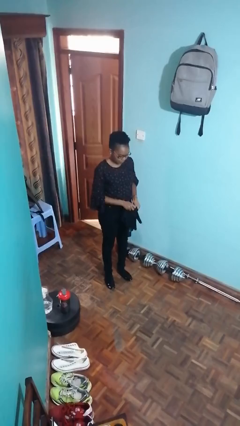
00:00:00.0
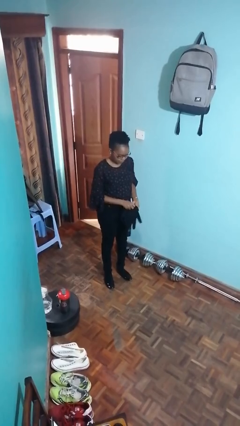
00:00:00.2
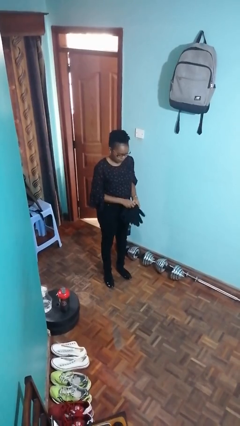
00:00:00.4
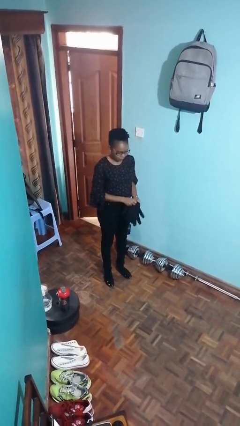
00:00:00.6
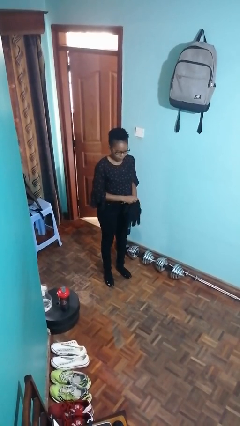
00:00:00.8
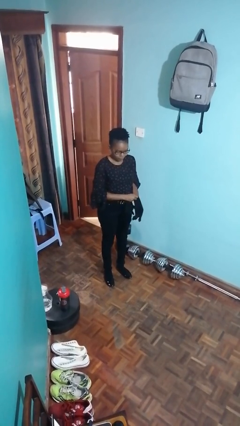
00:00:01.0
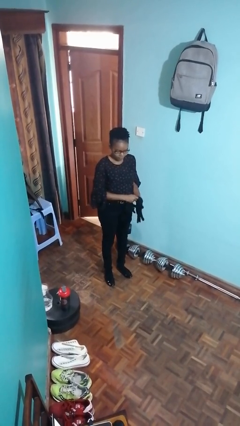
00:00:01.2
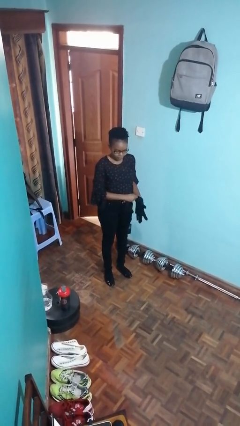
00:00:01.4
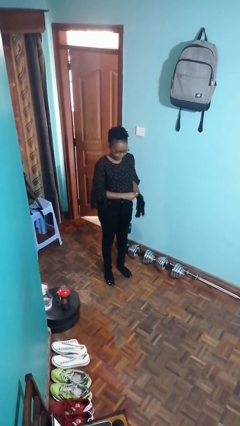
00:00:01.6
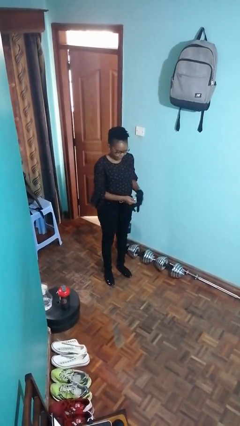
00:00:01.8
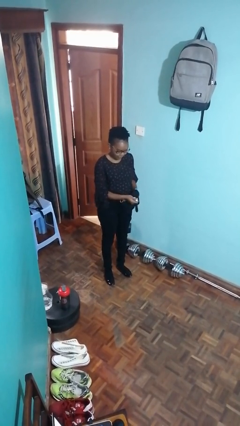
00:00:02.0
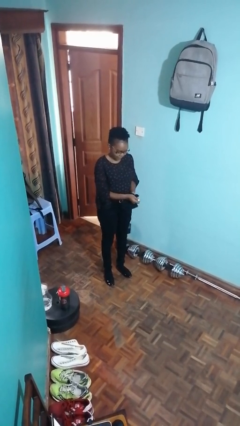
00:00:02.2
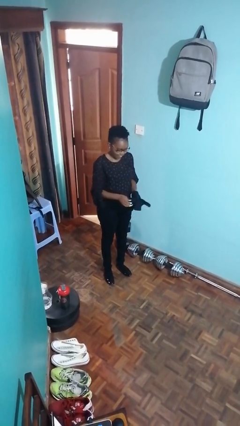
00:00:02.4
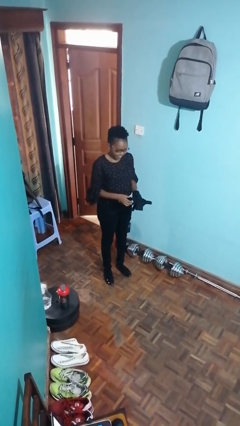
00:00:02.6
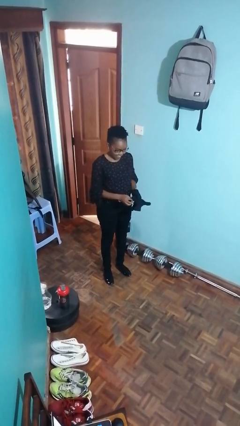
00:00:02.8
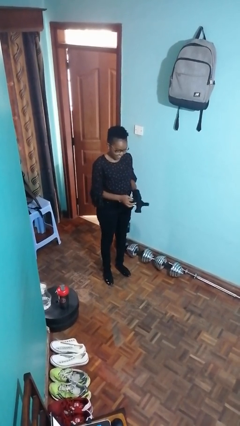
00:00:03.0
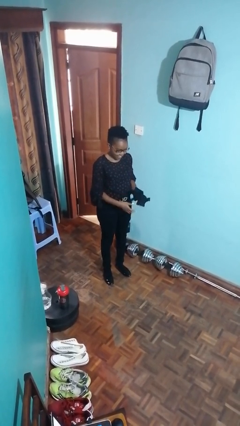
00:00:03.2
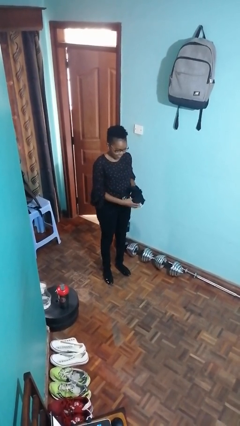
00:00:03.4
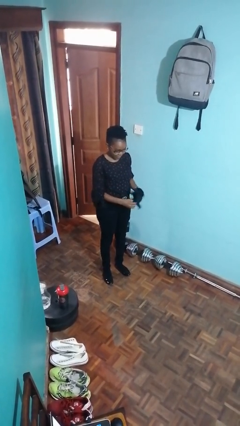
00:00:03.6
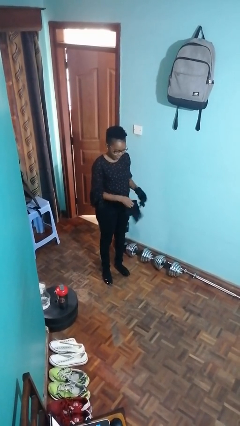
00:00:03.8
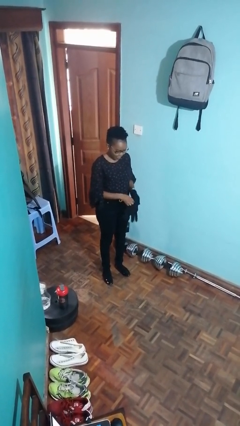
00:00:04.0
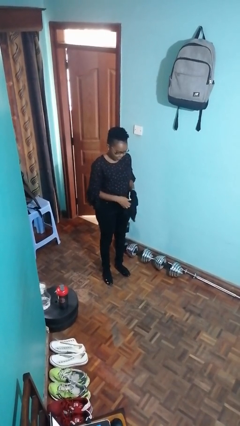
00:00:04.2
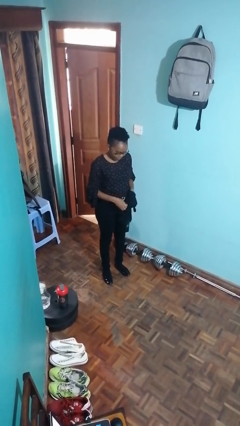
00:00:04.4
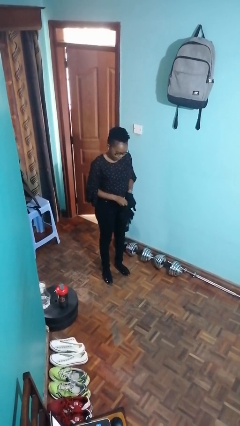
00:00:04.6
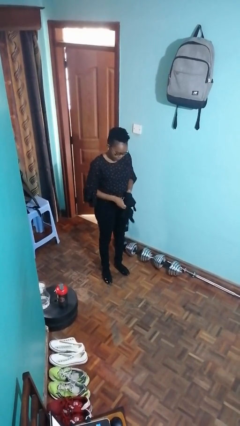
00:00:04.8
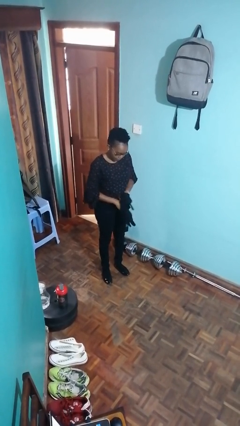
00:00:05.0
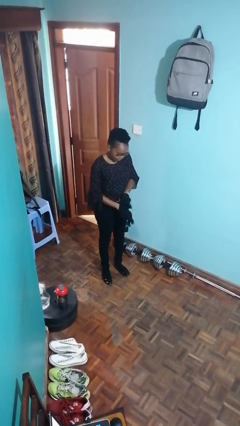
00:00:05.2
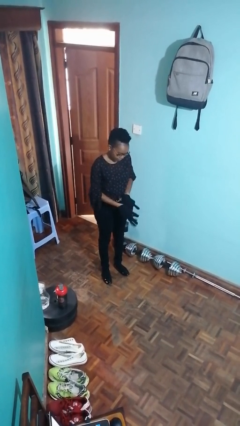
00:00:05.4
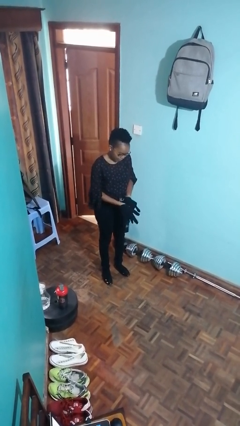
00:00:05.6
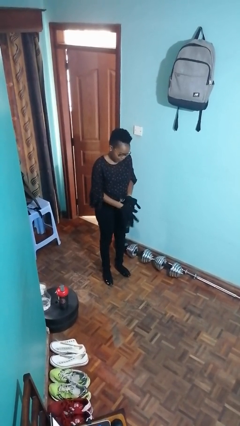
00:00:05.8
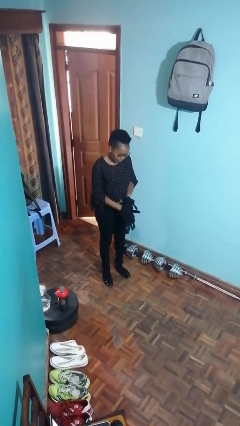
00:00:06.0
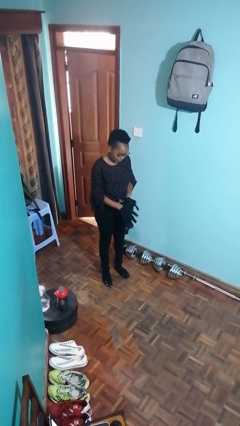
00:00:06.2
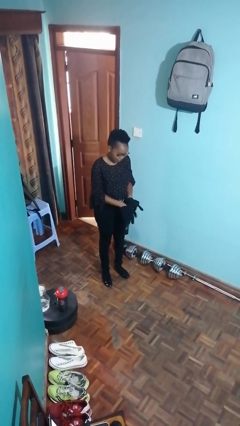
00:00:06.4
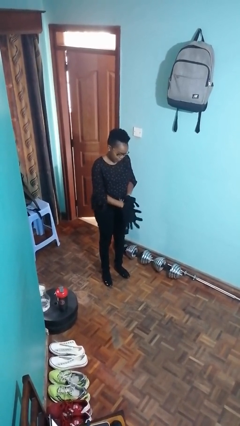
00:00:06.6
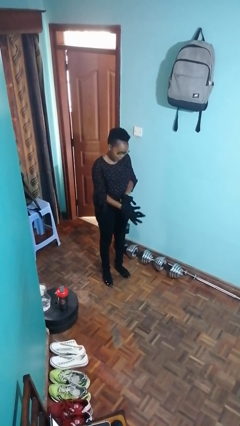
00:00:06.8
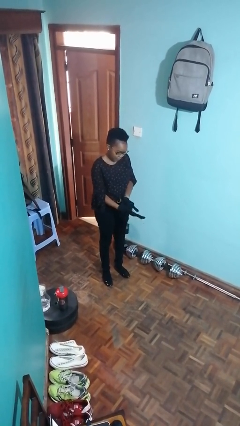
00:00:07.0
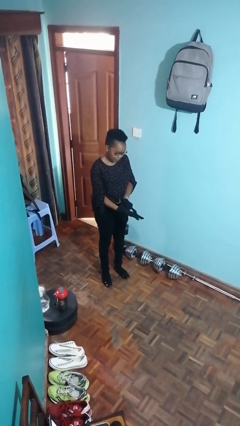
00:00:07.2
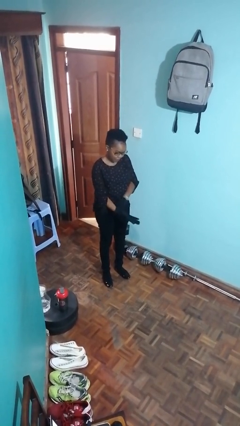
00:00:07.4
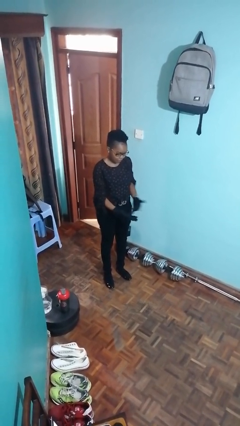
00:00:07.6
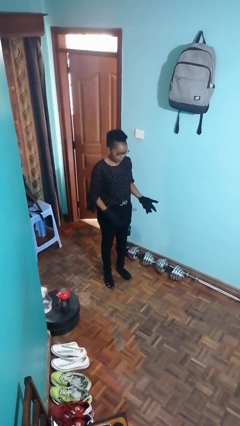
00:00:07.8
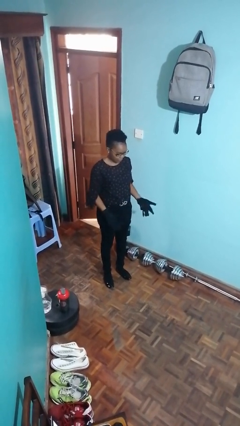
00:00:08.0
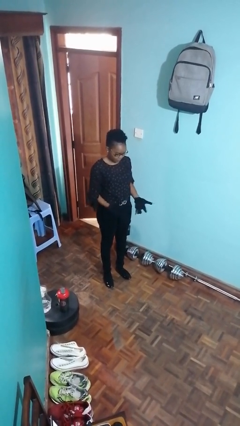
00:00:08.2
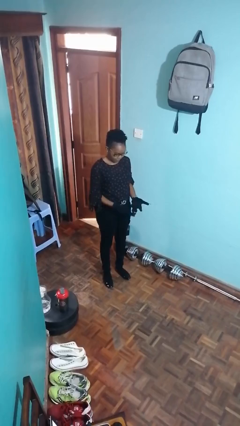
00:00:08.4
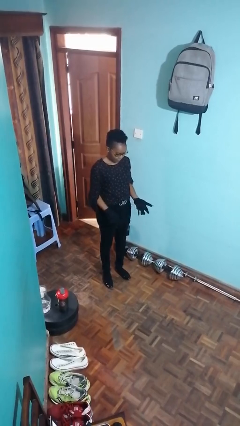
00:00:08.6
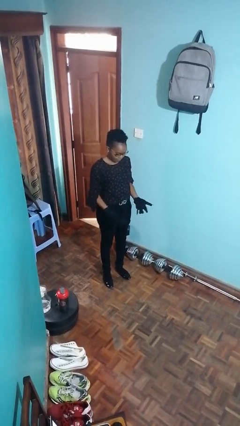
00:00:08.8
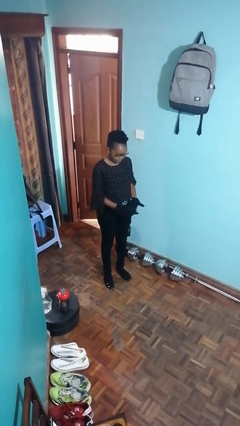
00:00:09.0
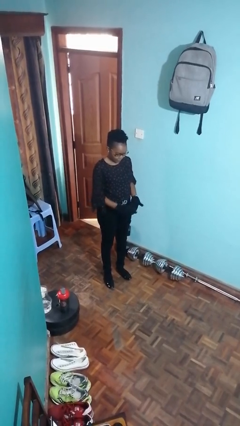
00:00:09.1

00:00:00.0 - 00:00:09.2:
person puts on gloves

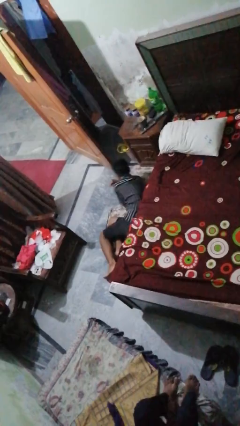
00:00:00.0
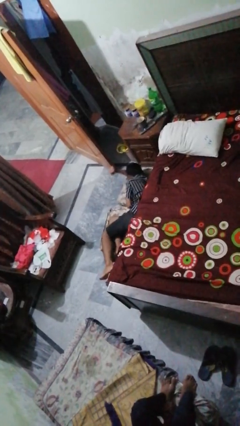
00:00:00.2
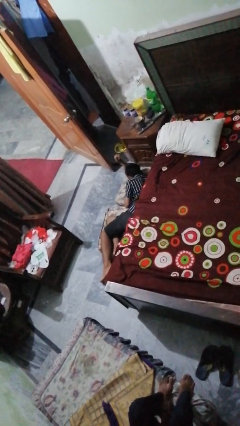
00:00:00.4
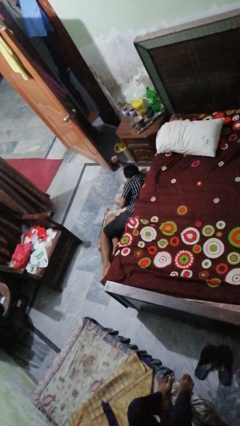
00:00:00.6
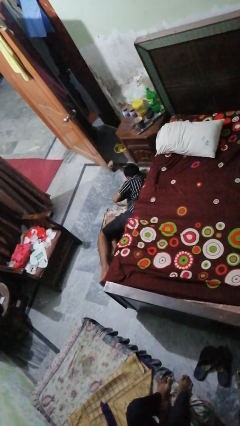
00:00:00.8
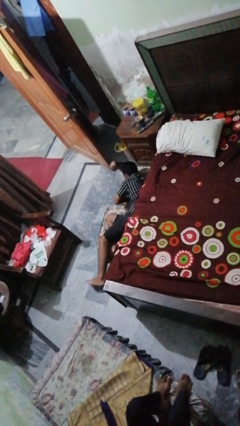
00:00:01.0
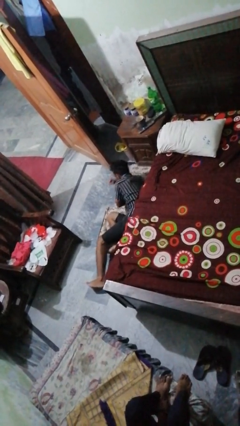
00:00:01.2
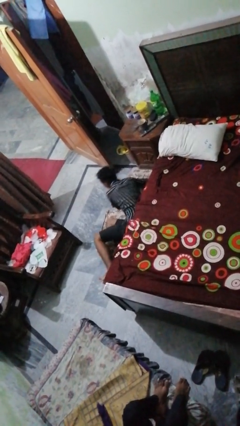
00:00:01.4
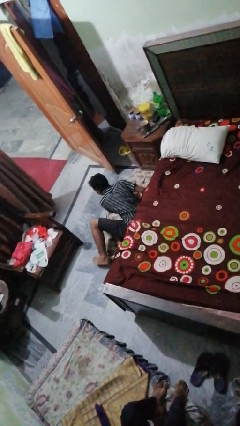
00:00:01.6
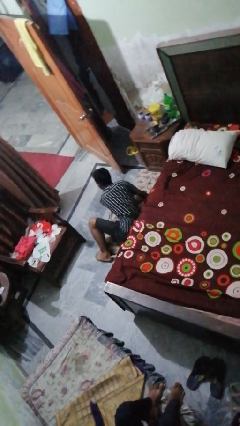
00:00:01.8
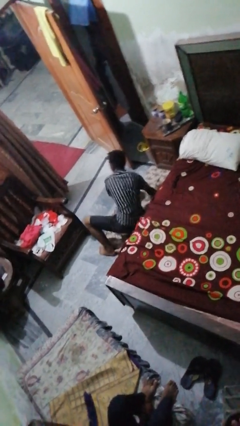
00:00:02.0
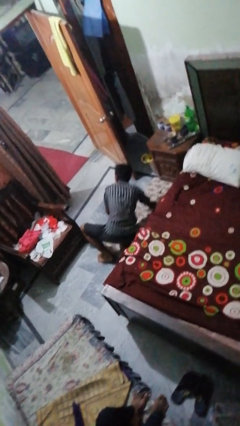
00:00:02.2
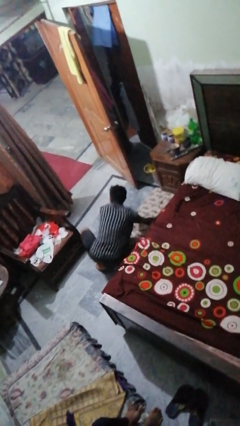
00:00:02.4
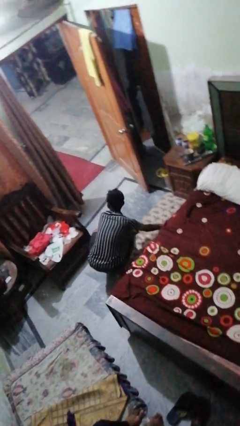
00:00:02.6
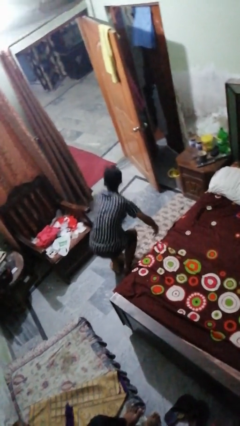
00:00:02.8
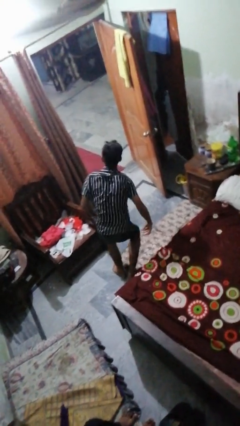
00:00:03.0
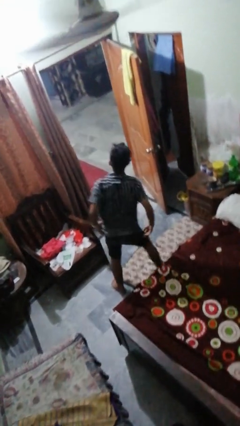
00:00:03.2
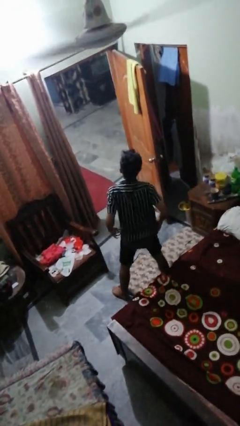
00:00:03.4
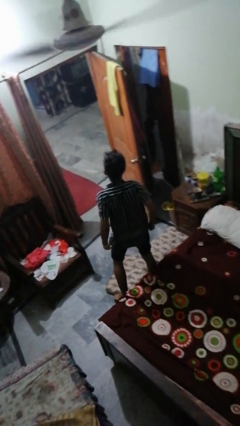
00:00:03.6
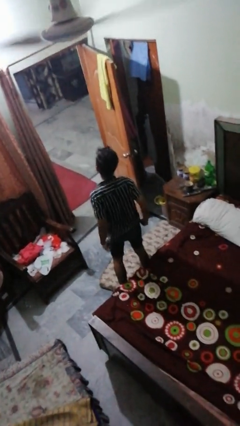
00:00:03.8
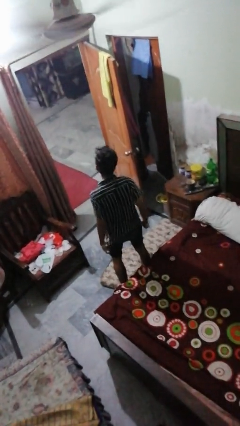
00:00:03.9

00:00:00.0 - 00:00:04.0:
person stands up from floor

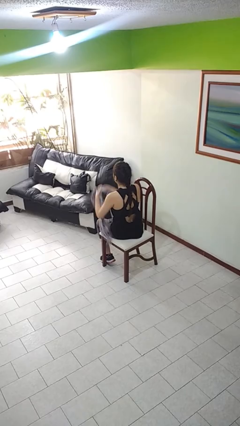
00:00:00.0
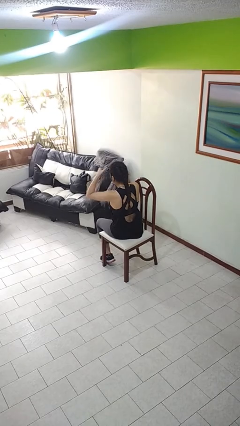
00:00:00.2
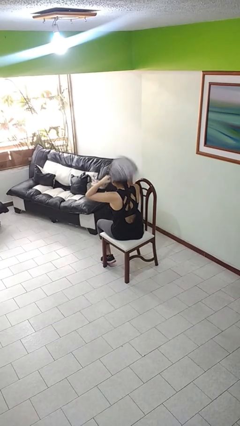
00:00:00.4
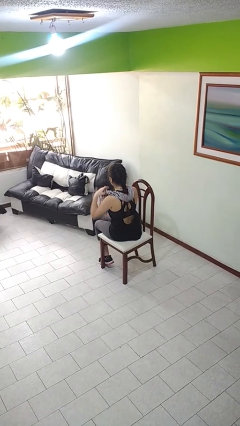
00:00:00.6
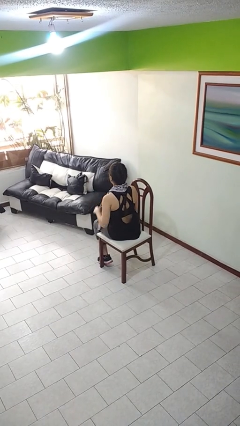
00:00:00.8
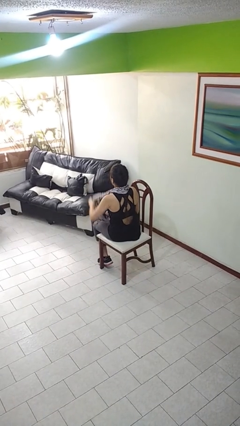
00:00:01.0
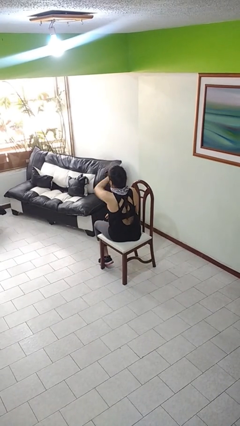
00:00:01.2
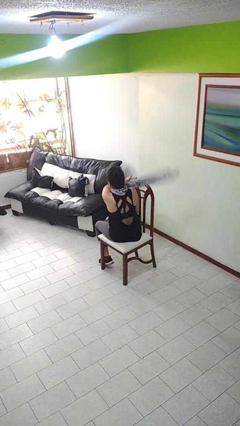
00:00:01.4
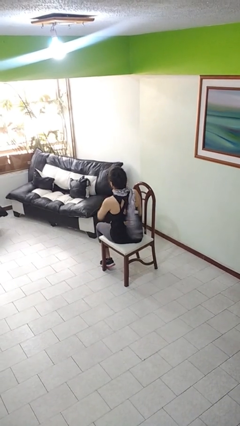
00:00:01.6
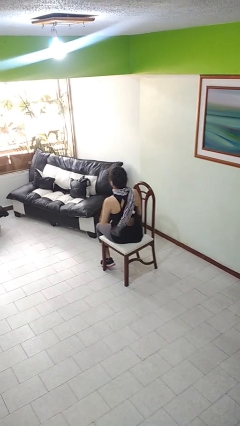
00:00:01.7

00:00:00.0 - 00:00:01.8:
person puts on scarf

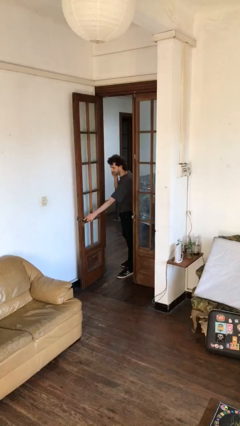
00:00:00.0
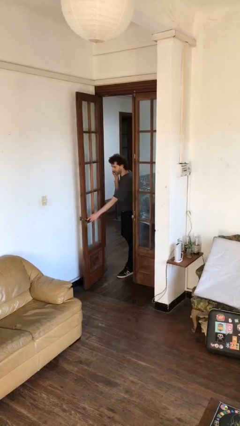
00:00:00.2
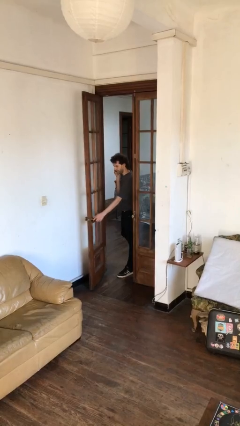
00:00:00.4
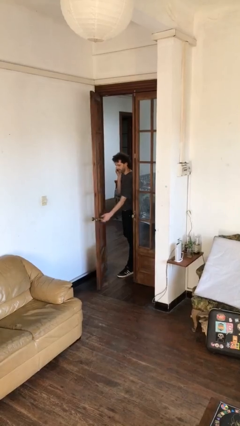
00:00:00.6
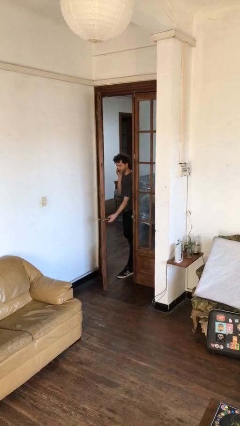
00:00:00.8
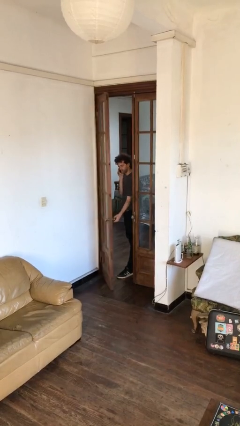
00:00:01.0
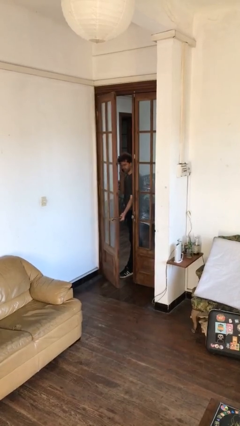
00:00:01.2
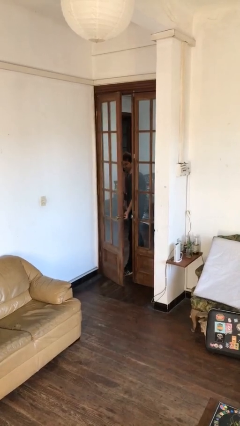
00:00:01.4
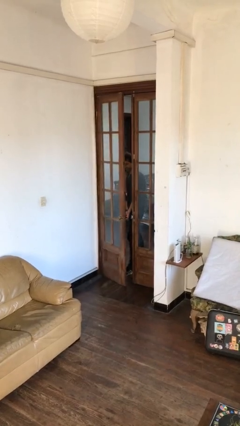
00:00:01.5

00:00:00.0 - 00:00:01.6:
person closes facility door

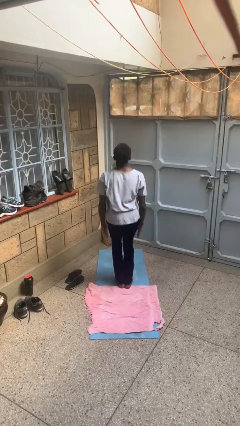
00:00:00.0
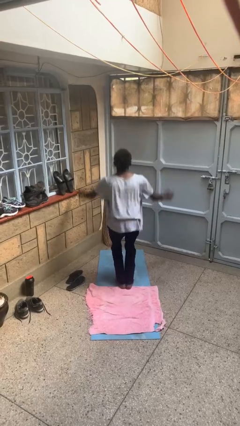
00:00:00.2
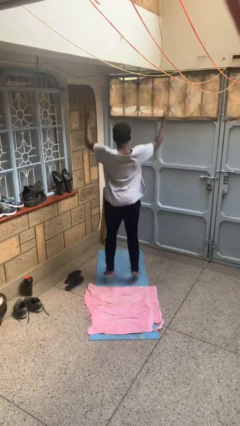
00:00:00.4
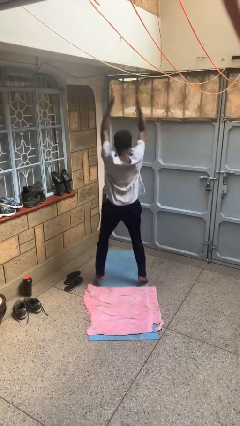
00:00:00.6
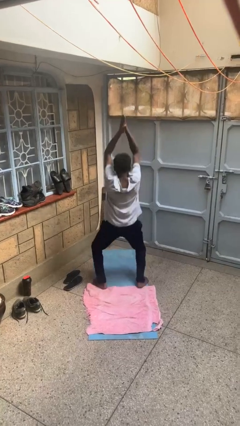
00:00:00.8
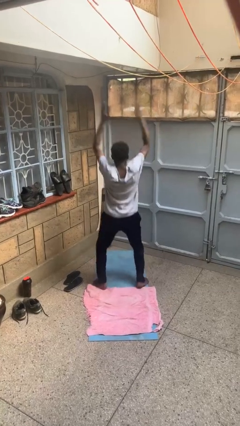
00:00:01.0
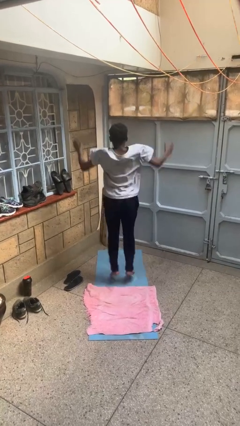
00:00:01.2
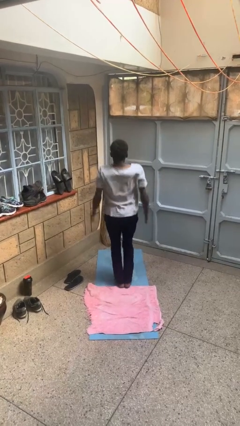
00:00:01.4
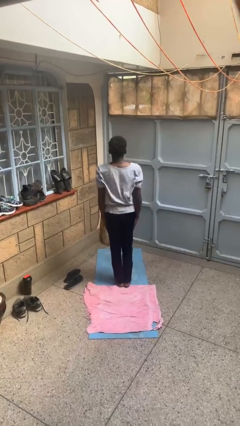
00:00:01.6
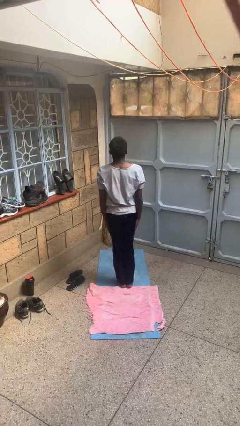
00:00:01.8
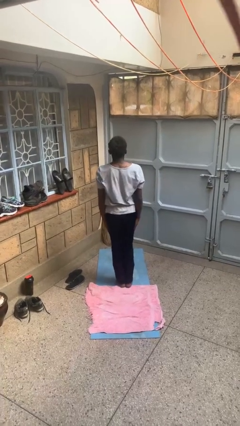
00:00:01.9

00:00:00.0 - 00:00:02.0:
person exercises with jumping jacks
